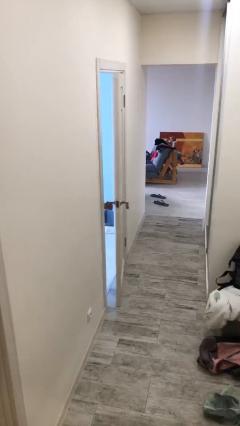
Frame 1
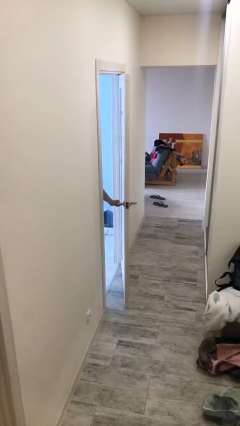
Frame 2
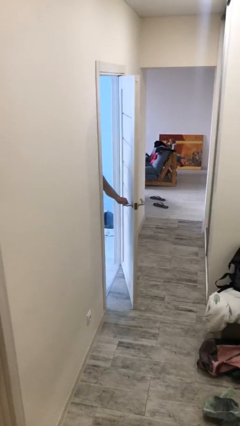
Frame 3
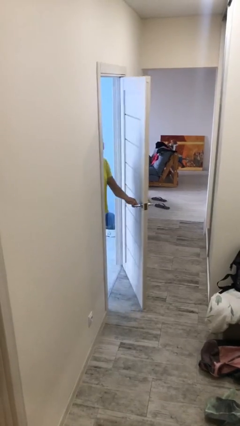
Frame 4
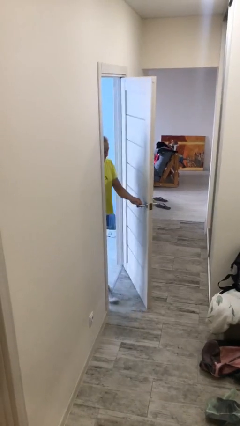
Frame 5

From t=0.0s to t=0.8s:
person opens facility door

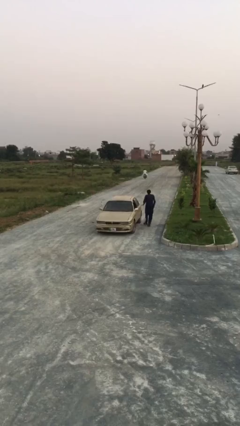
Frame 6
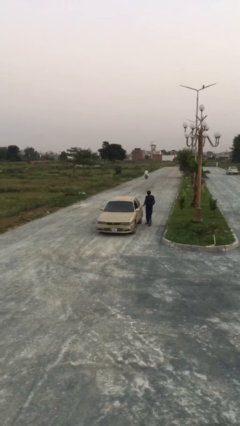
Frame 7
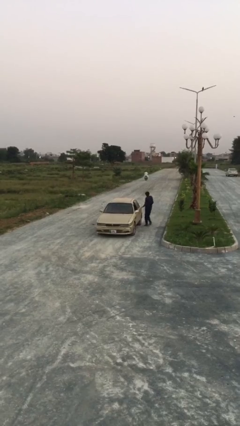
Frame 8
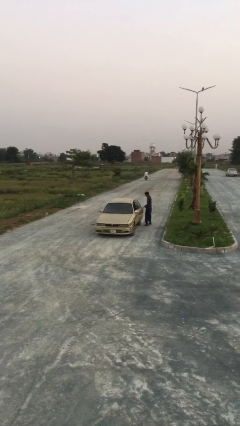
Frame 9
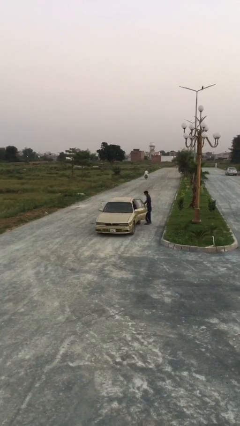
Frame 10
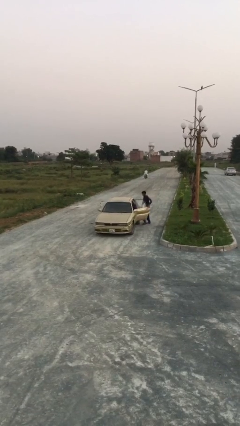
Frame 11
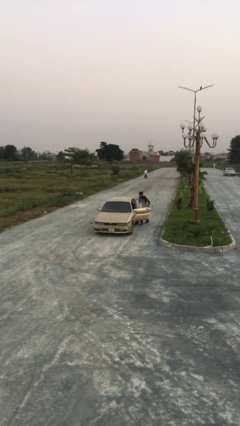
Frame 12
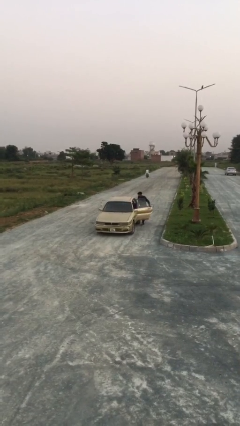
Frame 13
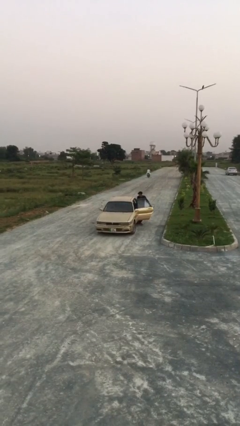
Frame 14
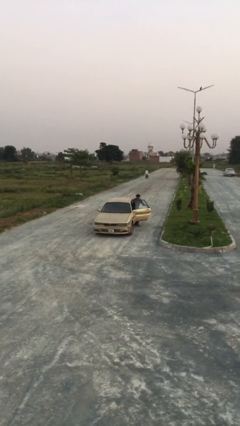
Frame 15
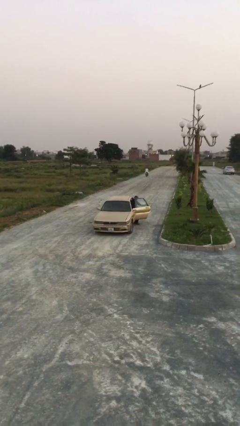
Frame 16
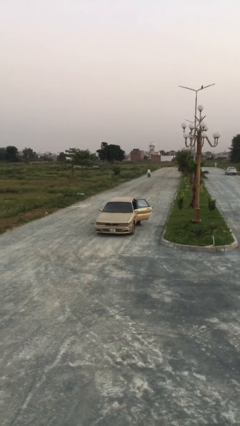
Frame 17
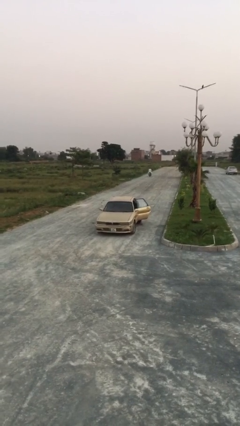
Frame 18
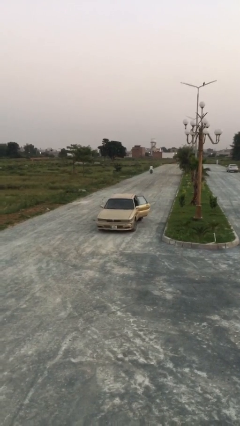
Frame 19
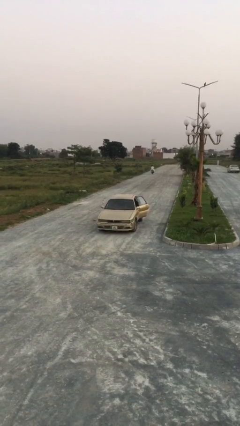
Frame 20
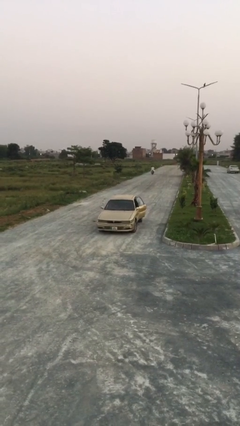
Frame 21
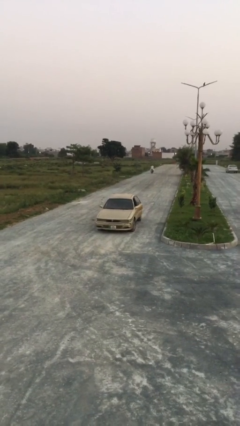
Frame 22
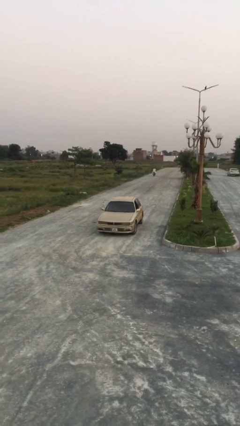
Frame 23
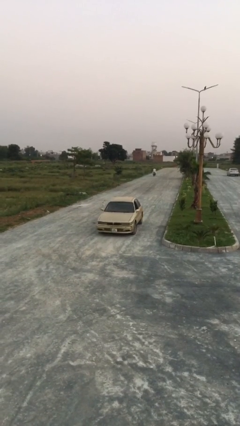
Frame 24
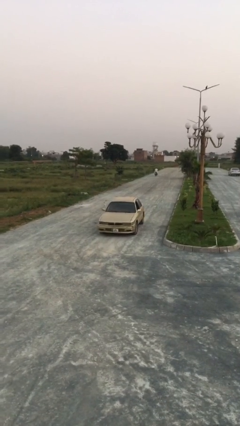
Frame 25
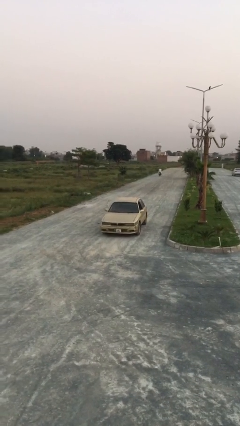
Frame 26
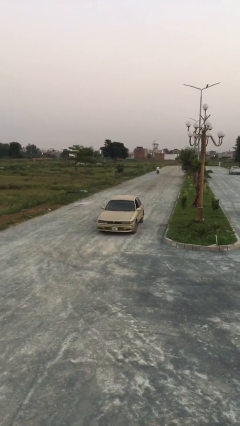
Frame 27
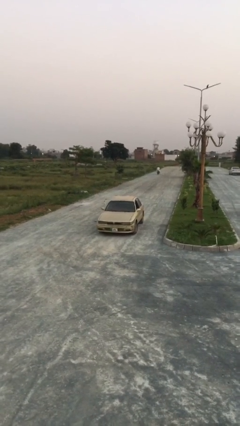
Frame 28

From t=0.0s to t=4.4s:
car picks up person

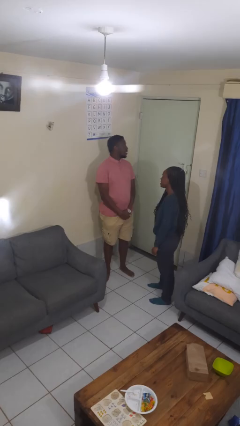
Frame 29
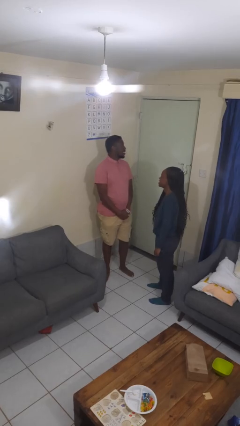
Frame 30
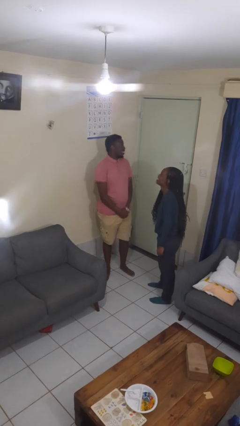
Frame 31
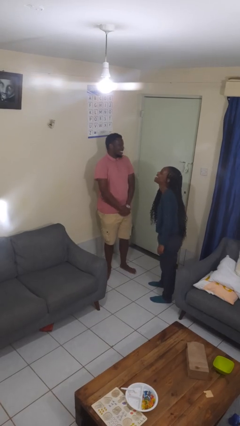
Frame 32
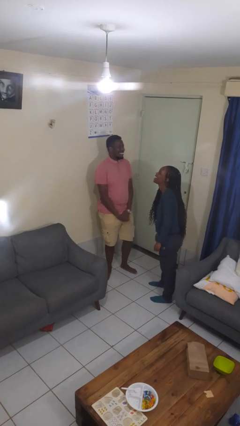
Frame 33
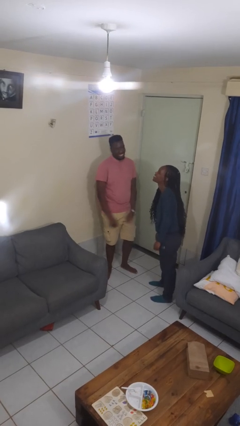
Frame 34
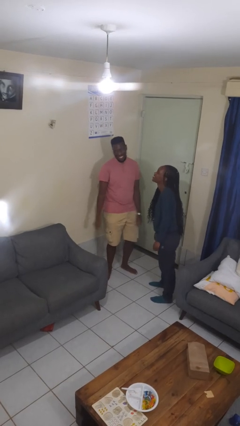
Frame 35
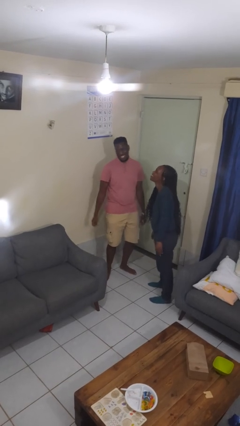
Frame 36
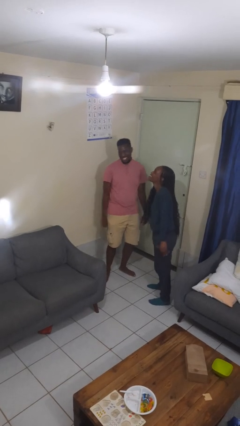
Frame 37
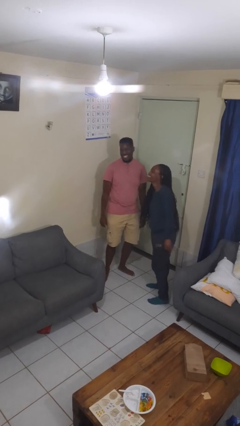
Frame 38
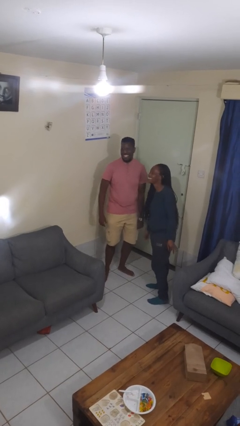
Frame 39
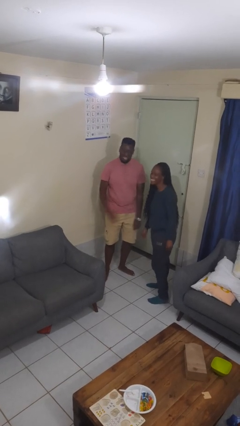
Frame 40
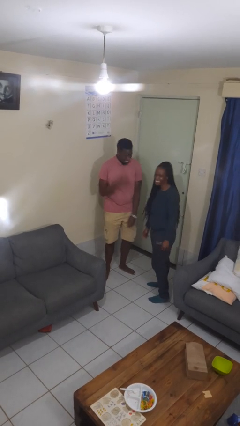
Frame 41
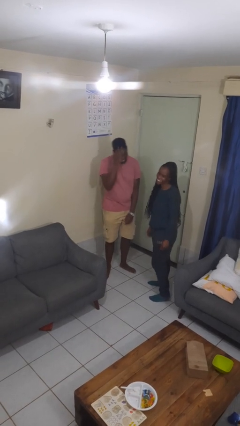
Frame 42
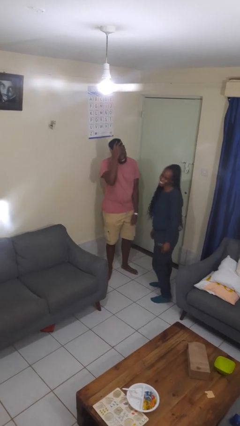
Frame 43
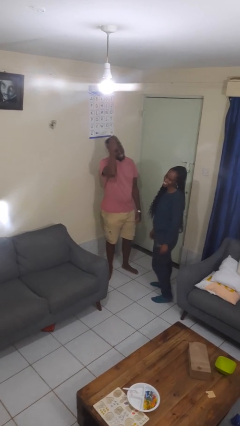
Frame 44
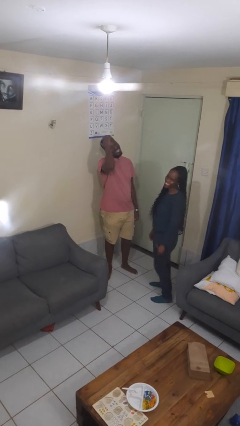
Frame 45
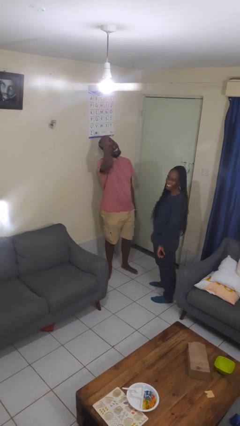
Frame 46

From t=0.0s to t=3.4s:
person laughs with person

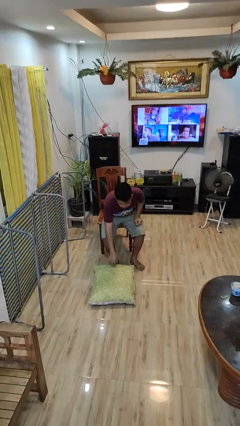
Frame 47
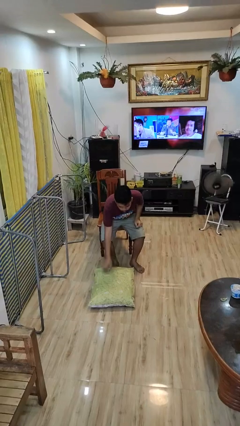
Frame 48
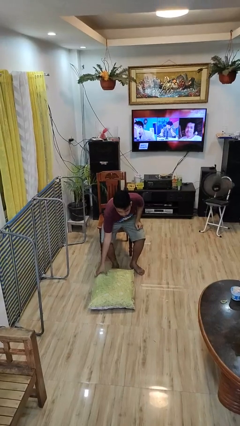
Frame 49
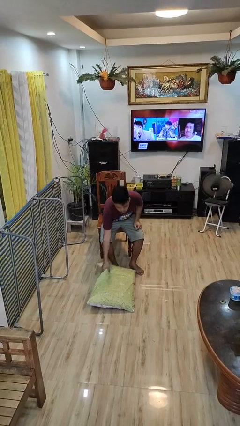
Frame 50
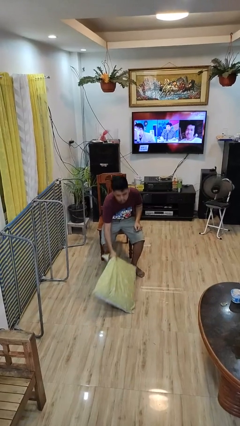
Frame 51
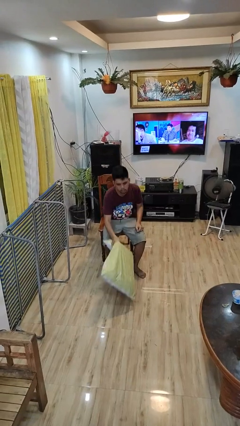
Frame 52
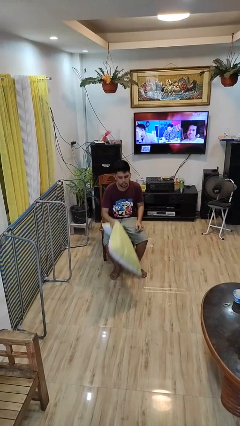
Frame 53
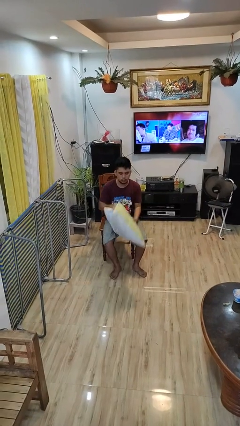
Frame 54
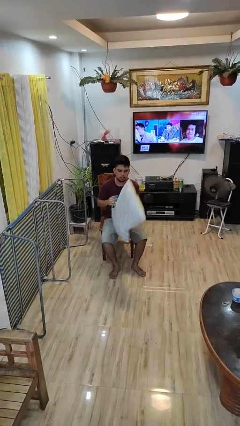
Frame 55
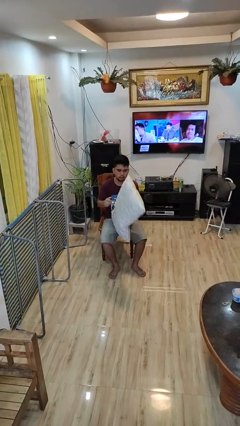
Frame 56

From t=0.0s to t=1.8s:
person picks up object from floor

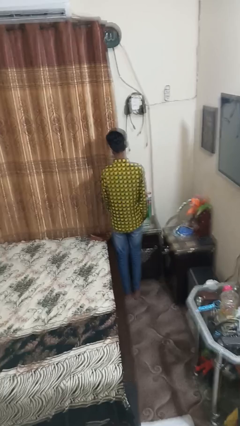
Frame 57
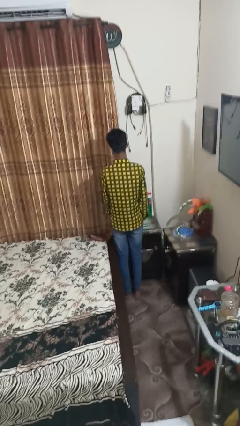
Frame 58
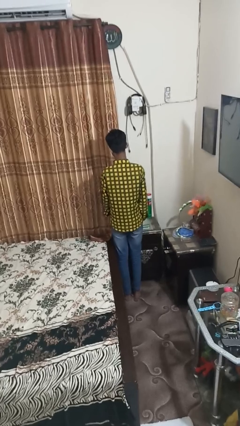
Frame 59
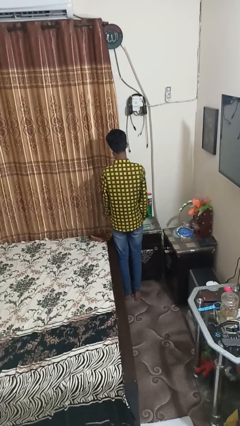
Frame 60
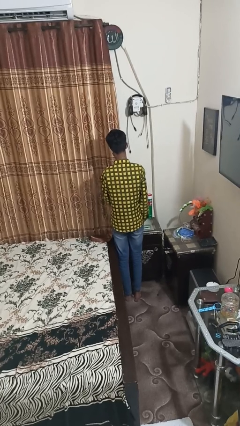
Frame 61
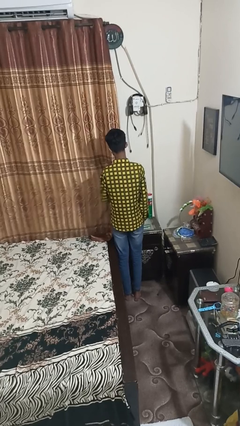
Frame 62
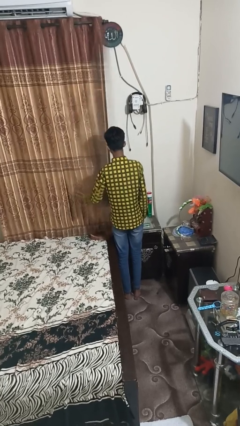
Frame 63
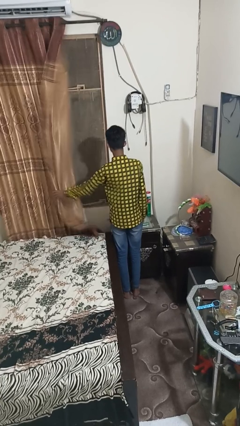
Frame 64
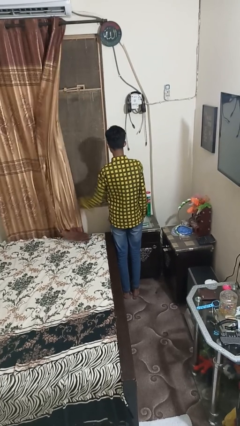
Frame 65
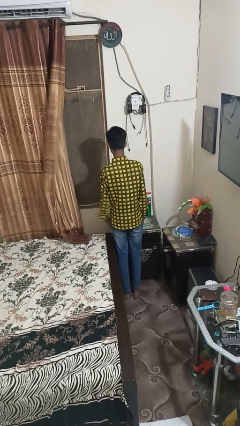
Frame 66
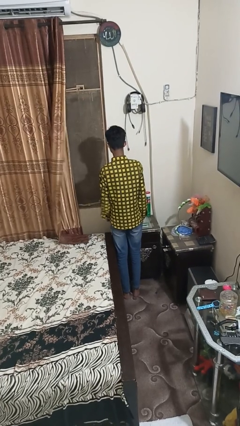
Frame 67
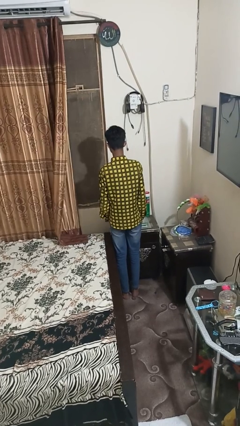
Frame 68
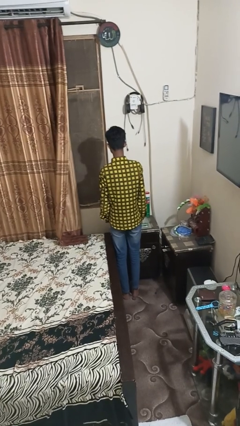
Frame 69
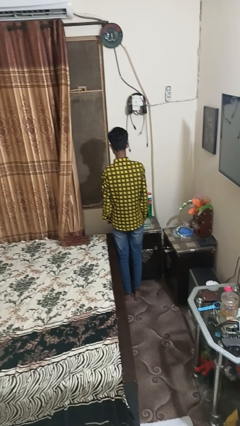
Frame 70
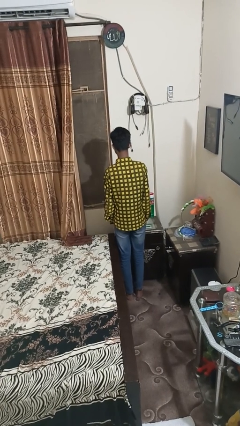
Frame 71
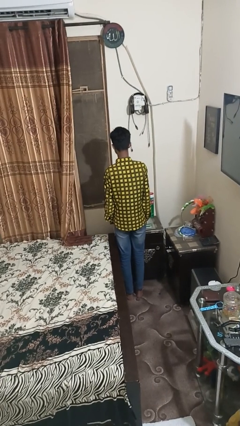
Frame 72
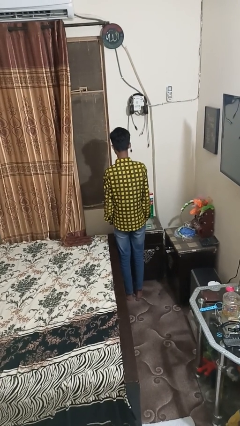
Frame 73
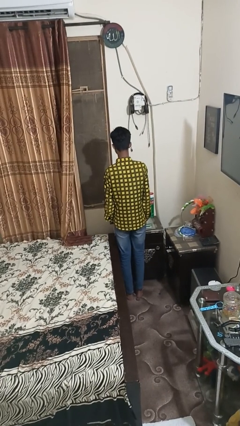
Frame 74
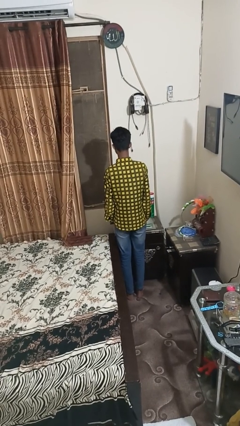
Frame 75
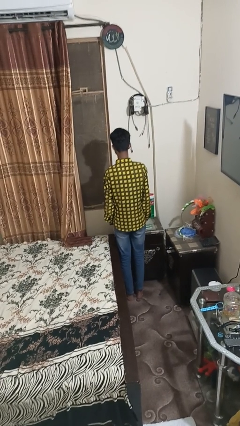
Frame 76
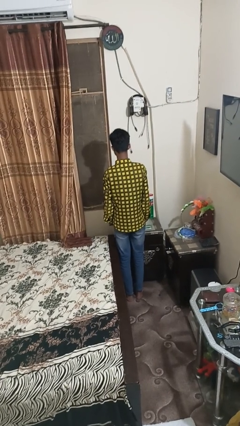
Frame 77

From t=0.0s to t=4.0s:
person opens curtains

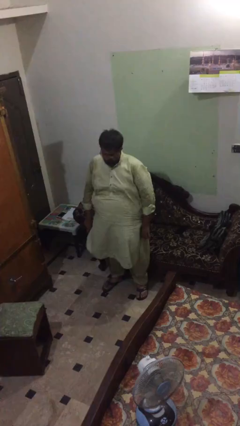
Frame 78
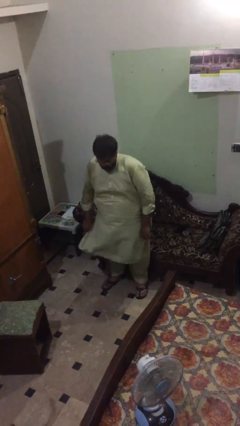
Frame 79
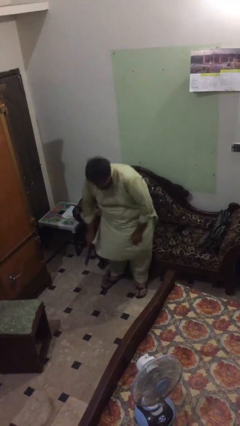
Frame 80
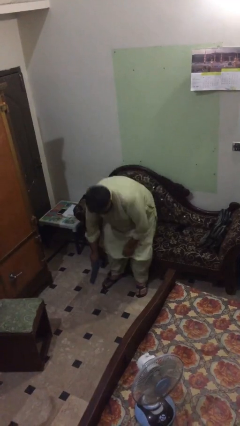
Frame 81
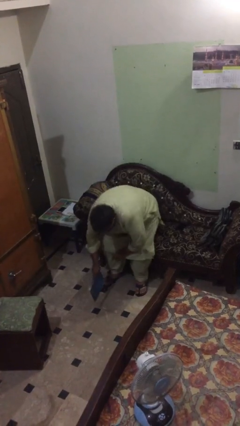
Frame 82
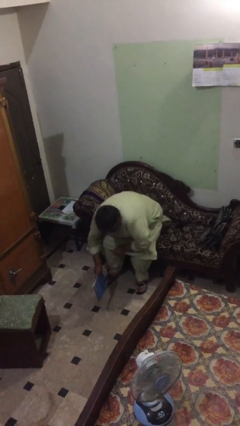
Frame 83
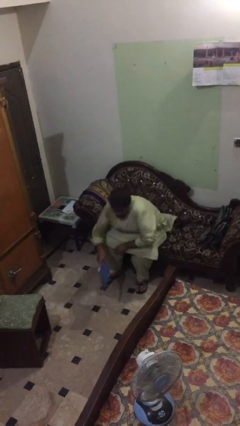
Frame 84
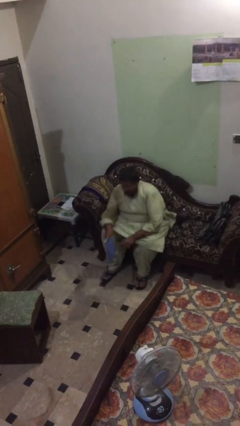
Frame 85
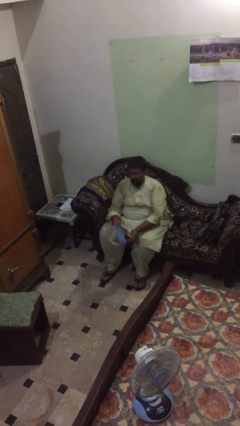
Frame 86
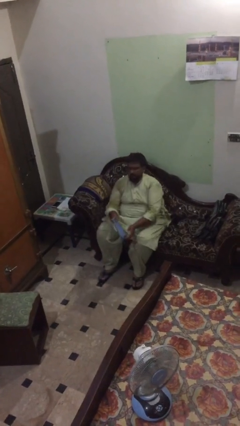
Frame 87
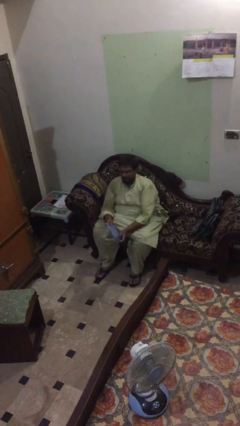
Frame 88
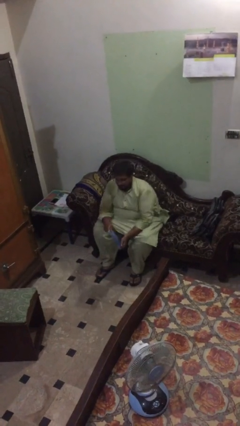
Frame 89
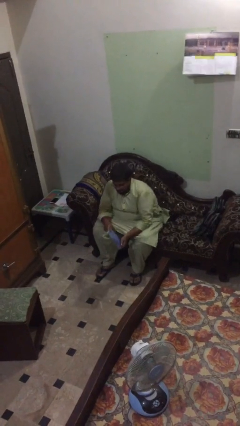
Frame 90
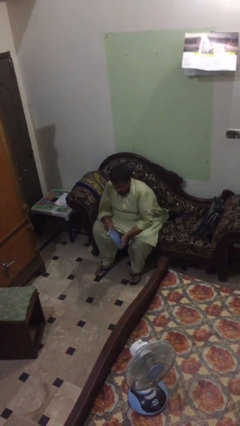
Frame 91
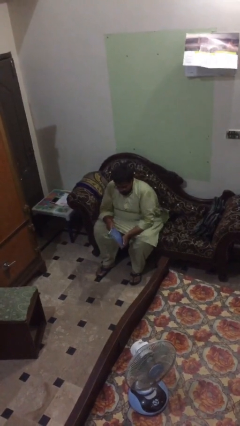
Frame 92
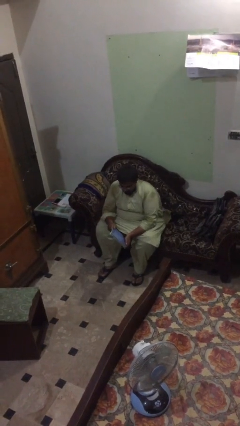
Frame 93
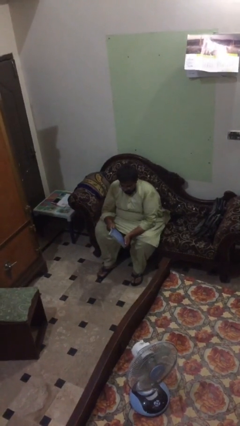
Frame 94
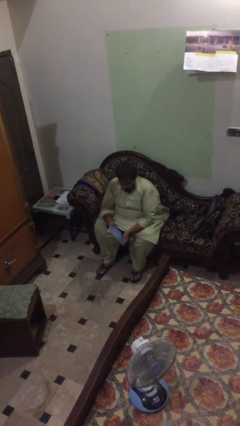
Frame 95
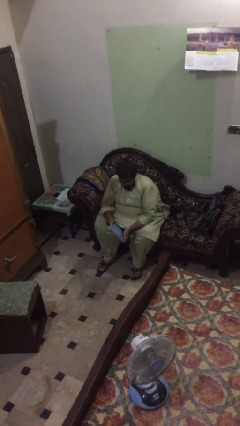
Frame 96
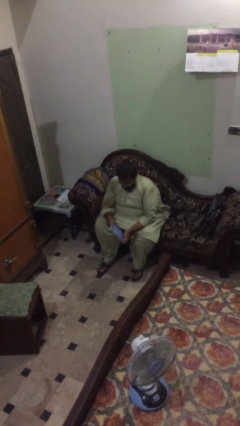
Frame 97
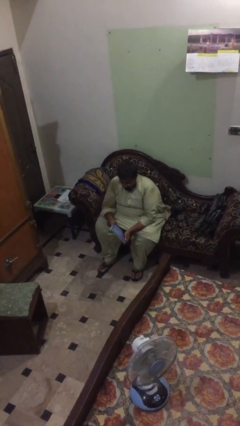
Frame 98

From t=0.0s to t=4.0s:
person texts on phone
